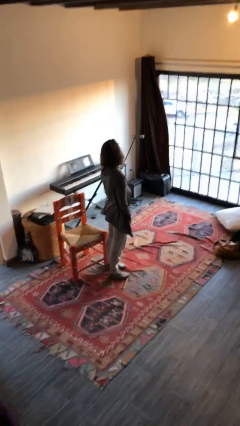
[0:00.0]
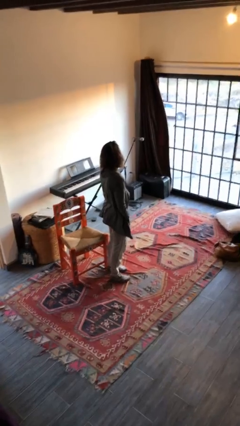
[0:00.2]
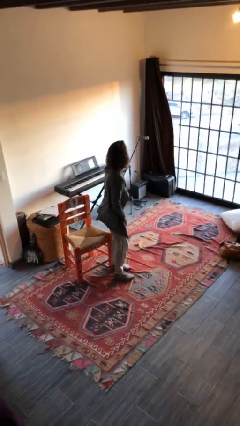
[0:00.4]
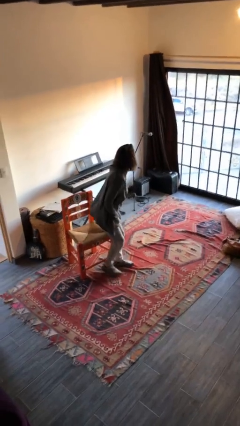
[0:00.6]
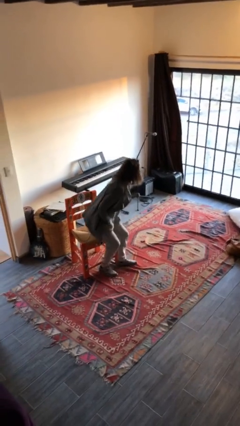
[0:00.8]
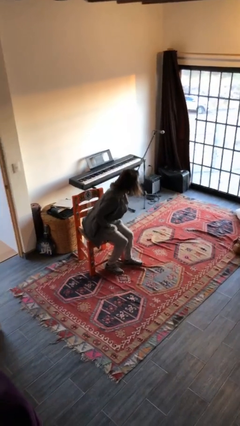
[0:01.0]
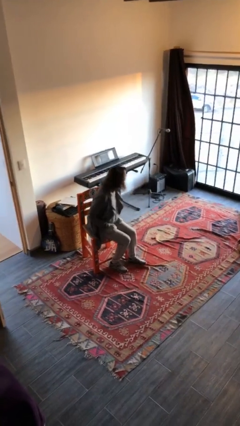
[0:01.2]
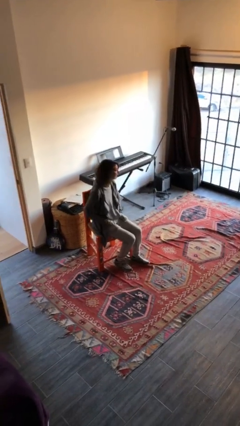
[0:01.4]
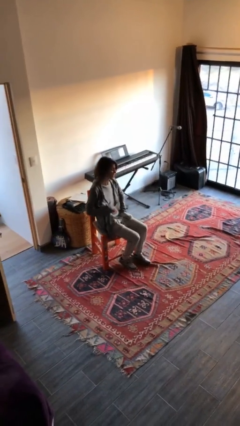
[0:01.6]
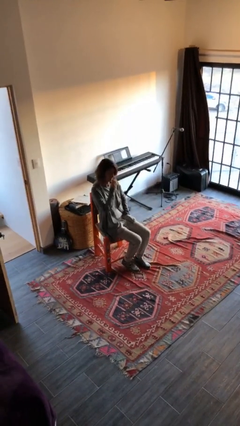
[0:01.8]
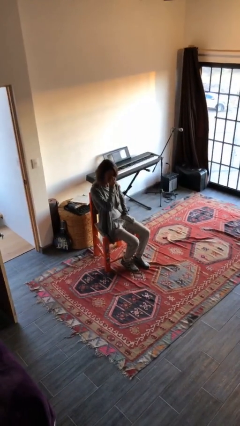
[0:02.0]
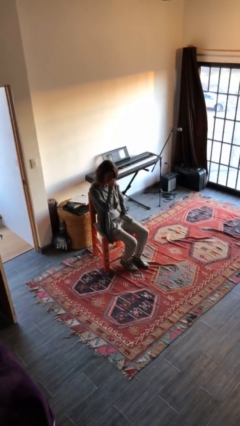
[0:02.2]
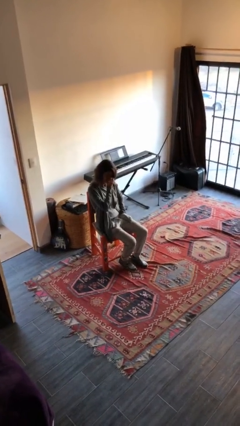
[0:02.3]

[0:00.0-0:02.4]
person sits down

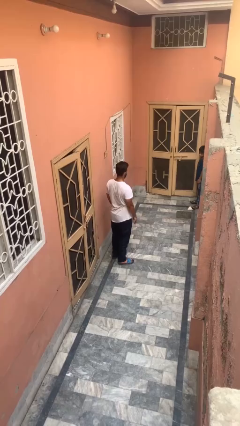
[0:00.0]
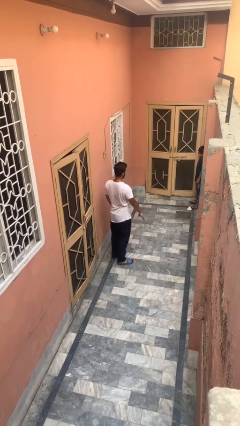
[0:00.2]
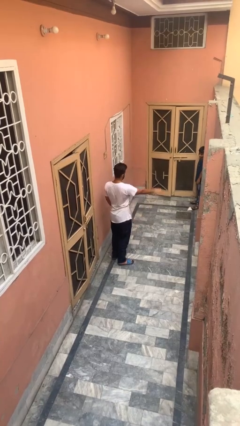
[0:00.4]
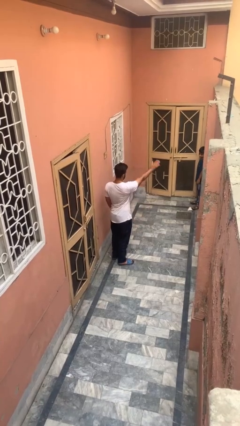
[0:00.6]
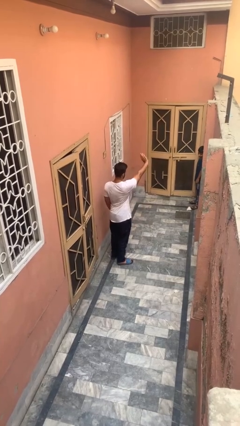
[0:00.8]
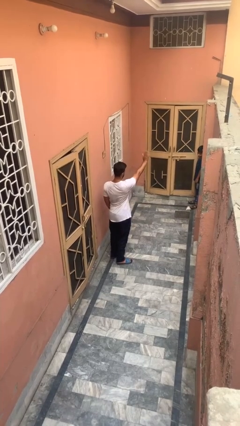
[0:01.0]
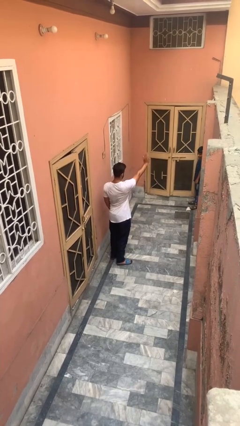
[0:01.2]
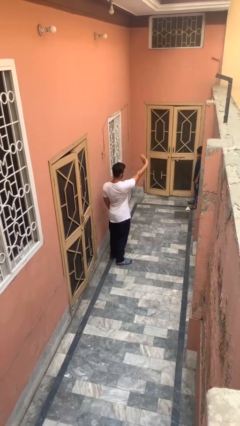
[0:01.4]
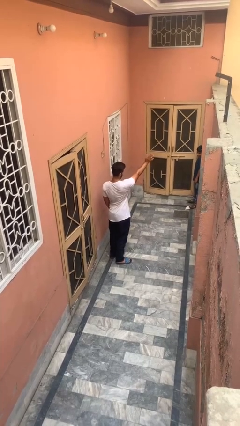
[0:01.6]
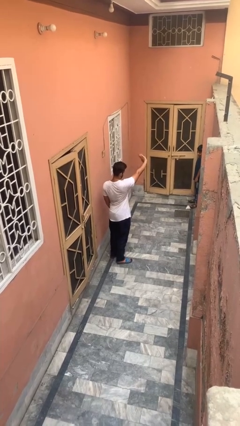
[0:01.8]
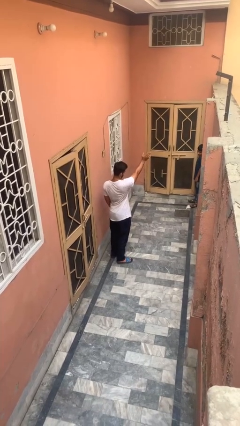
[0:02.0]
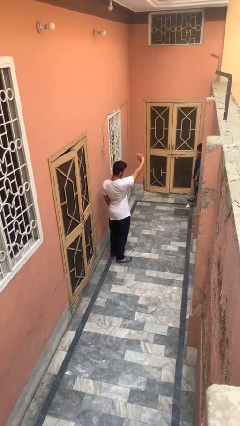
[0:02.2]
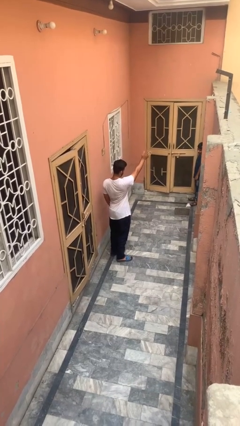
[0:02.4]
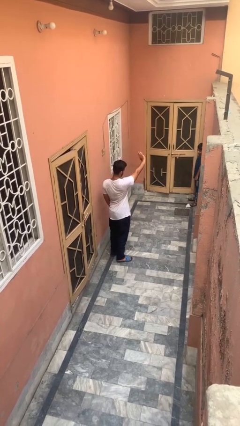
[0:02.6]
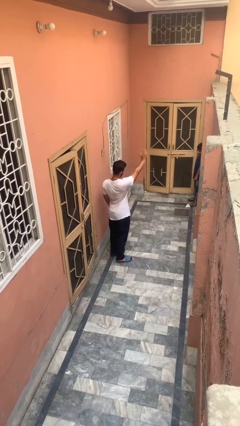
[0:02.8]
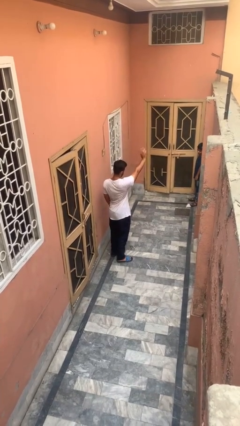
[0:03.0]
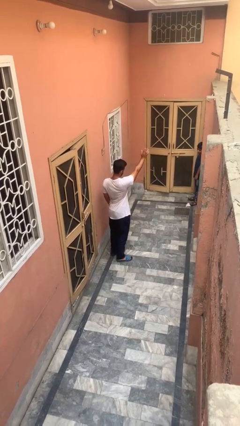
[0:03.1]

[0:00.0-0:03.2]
person waves at person

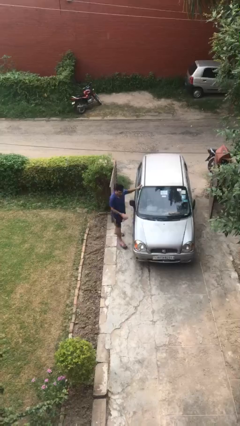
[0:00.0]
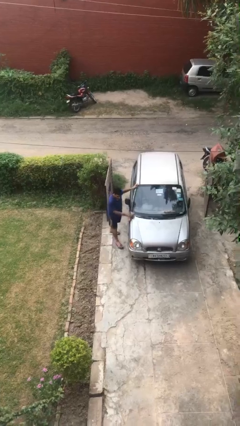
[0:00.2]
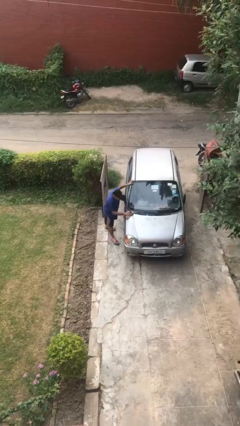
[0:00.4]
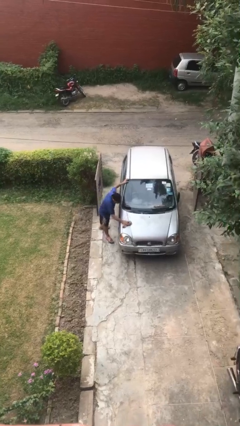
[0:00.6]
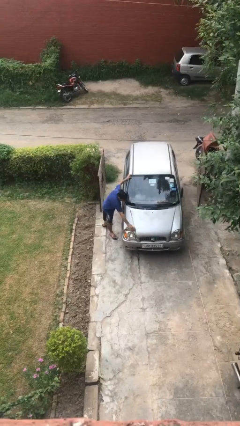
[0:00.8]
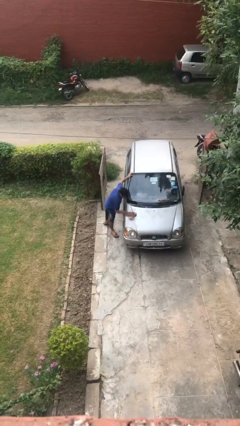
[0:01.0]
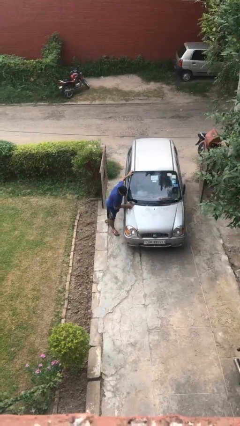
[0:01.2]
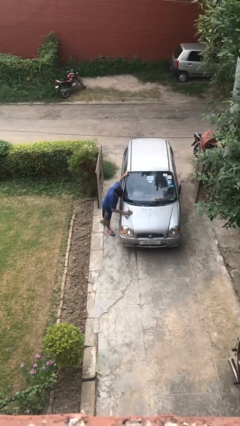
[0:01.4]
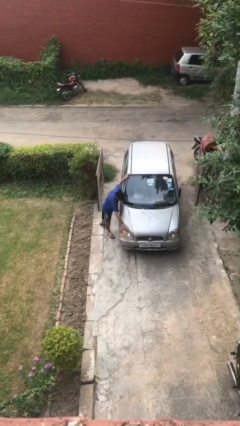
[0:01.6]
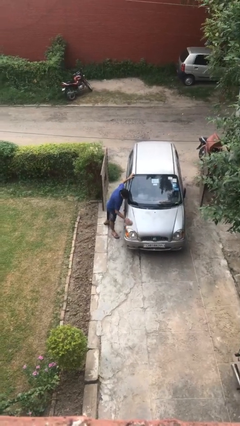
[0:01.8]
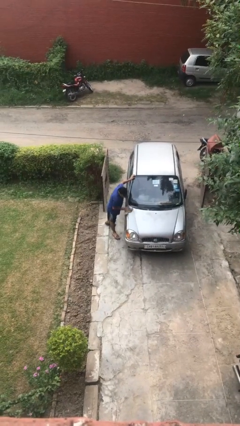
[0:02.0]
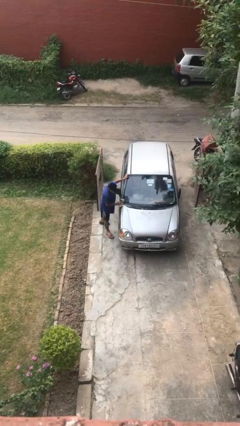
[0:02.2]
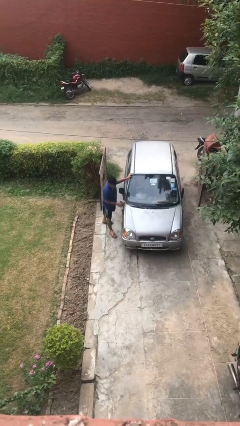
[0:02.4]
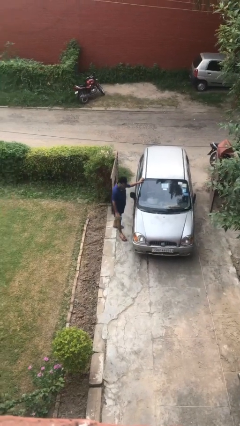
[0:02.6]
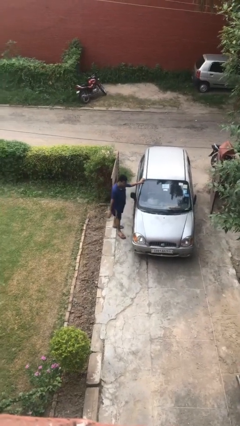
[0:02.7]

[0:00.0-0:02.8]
person polishes car with rag

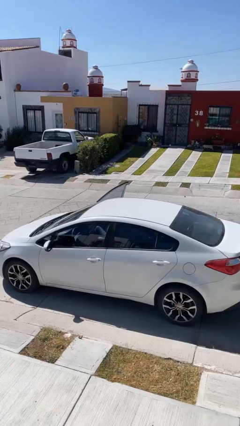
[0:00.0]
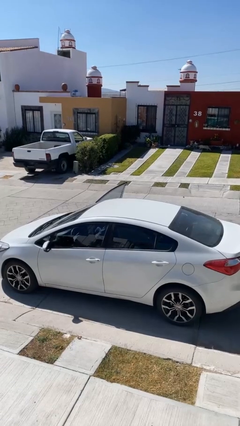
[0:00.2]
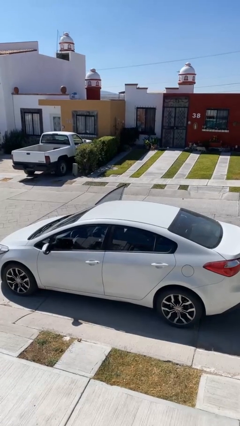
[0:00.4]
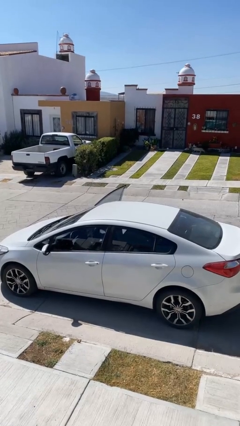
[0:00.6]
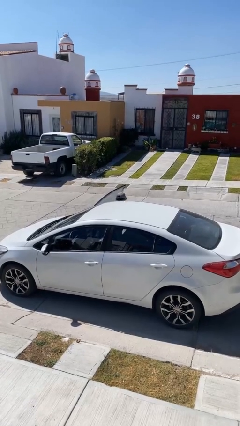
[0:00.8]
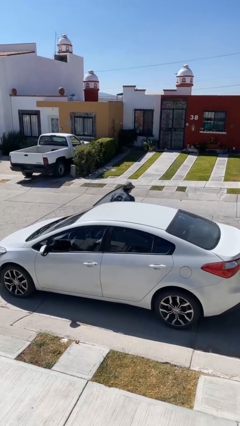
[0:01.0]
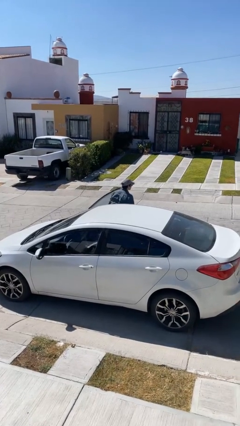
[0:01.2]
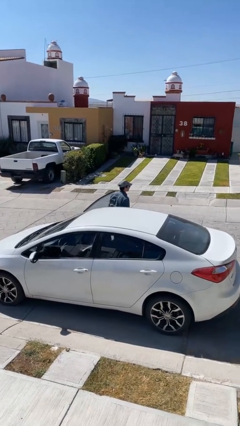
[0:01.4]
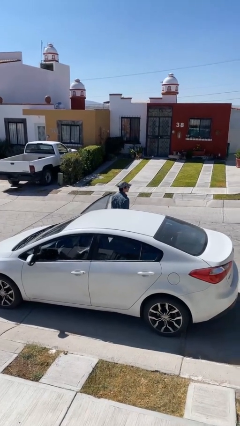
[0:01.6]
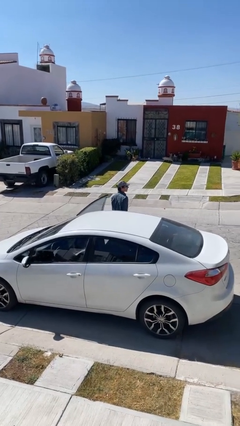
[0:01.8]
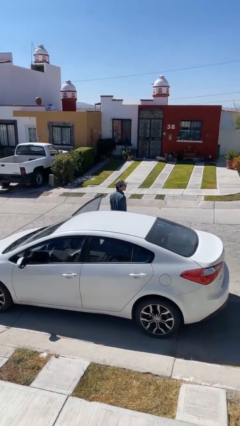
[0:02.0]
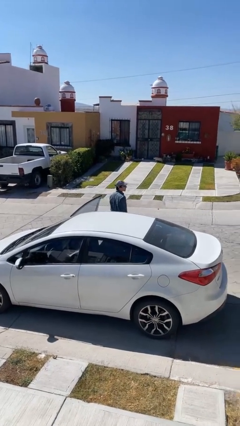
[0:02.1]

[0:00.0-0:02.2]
person exits car

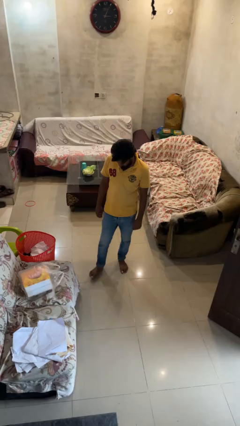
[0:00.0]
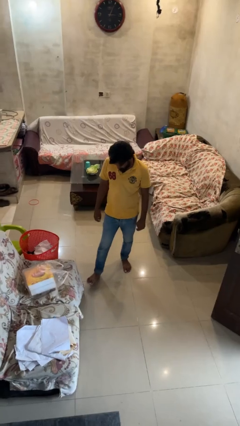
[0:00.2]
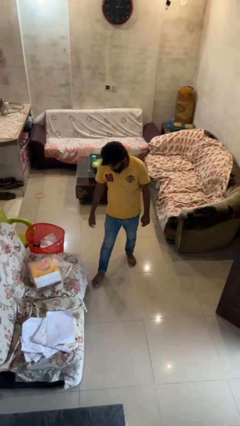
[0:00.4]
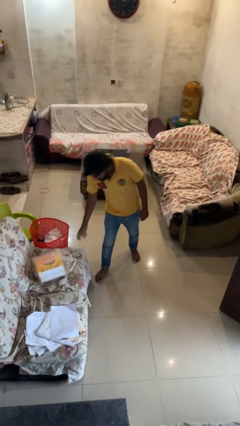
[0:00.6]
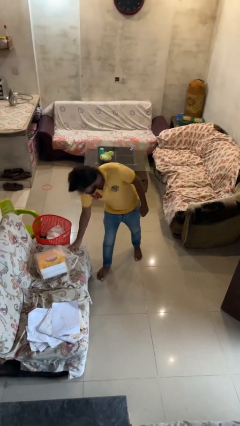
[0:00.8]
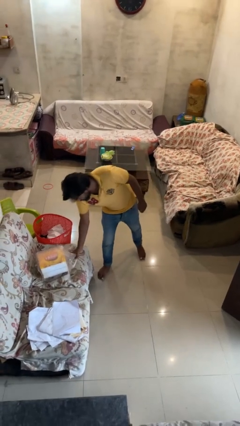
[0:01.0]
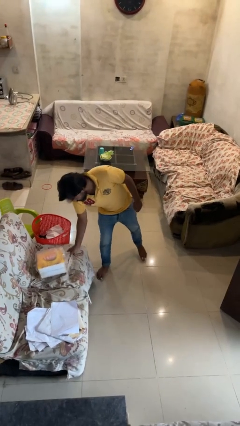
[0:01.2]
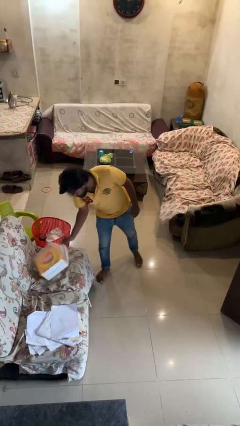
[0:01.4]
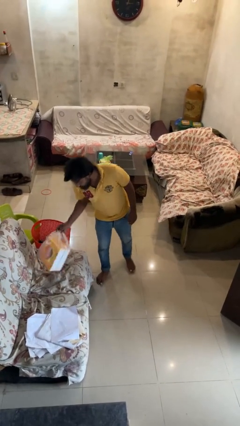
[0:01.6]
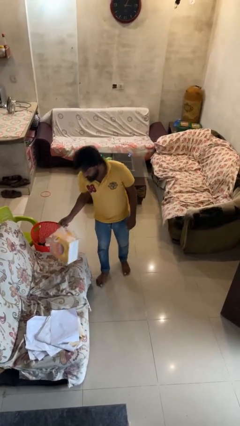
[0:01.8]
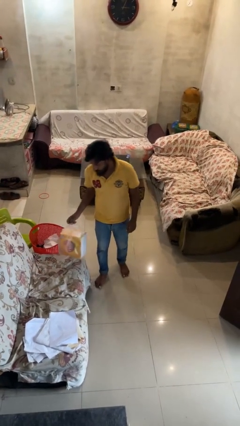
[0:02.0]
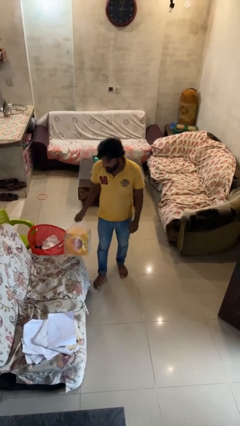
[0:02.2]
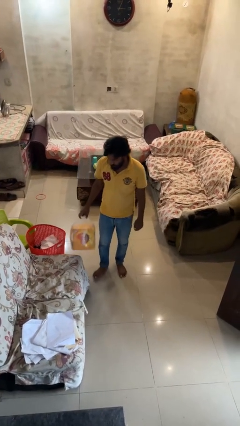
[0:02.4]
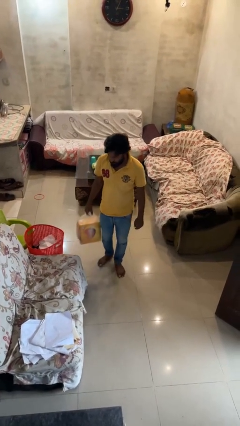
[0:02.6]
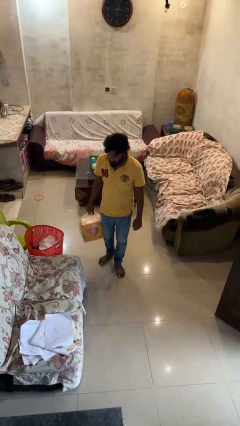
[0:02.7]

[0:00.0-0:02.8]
person picks up object from couch

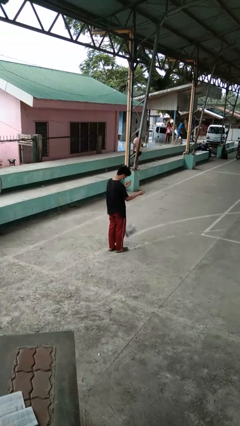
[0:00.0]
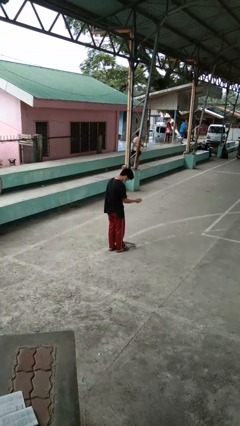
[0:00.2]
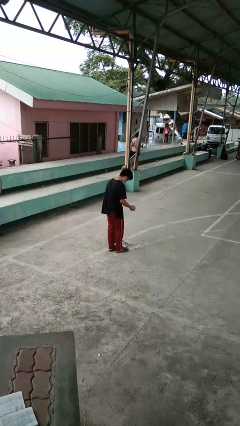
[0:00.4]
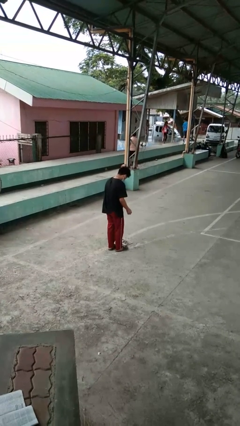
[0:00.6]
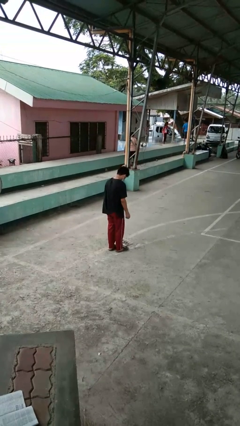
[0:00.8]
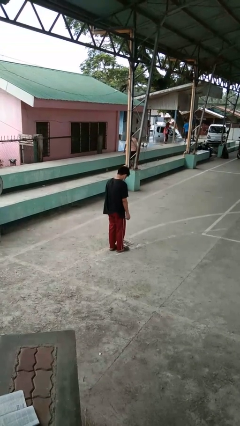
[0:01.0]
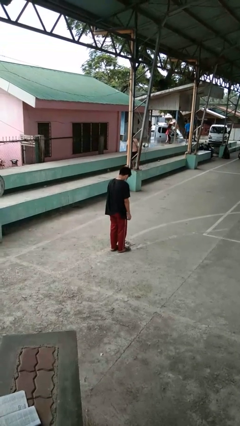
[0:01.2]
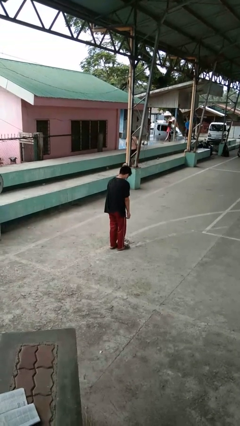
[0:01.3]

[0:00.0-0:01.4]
person drops object

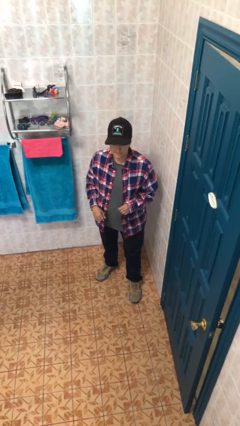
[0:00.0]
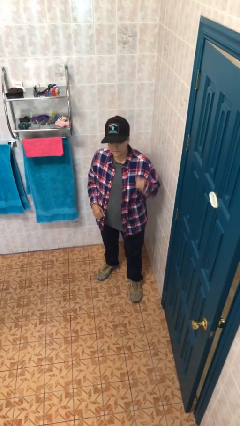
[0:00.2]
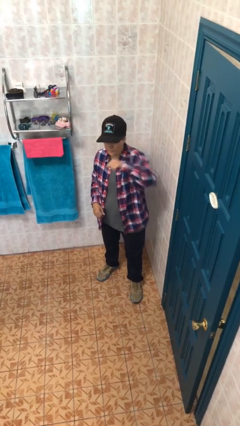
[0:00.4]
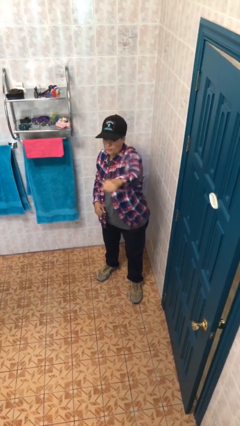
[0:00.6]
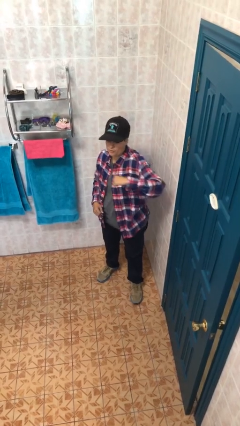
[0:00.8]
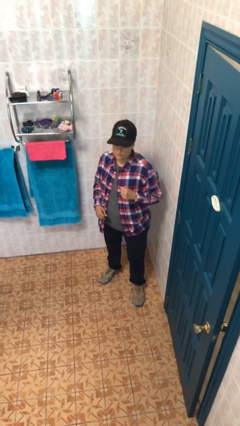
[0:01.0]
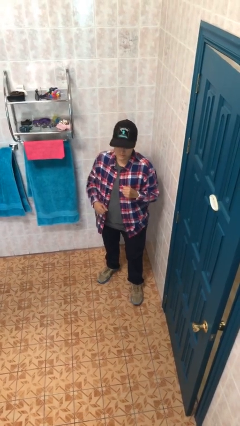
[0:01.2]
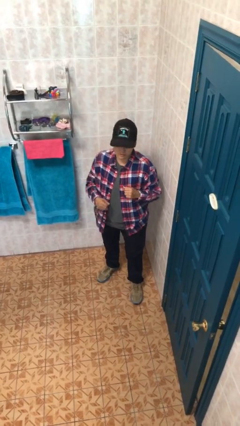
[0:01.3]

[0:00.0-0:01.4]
person punches

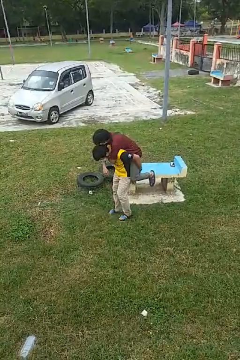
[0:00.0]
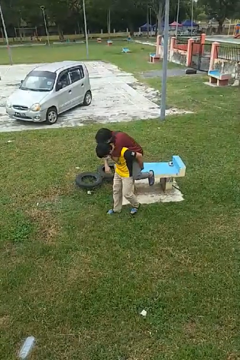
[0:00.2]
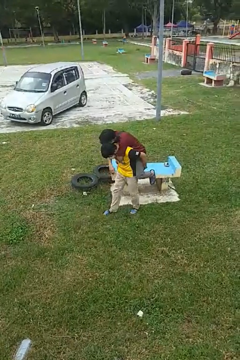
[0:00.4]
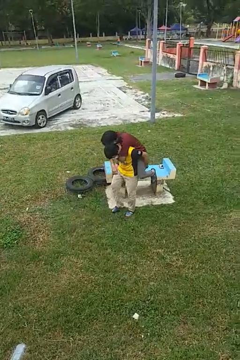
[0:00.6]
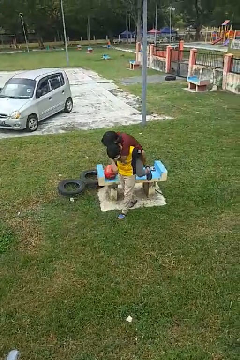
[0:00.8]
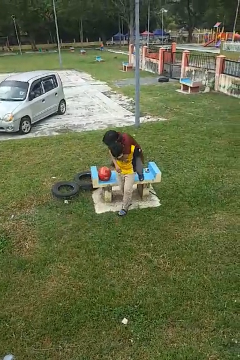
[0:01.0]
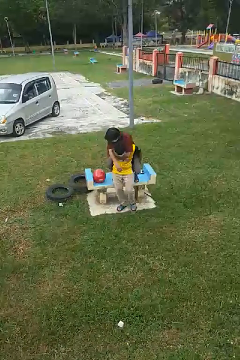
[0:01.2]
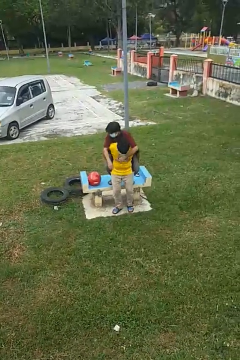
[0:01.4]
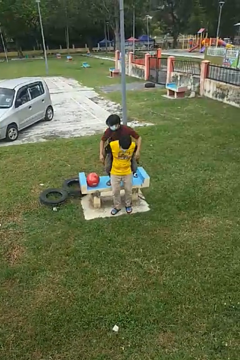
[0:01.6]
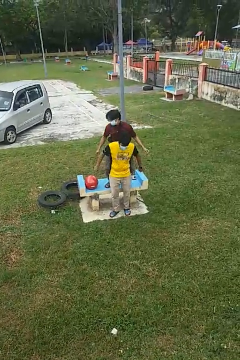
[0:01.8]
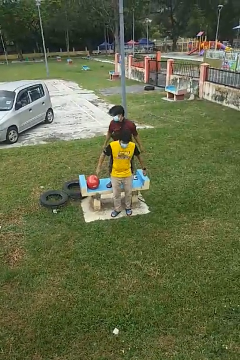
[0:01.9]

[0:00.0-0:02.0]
person puts down person
